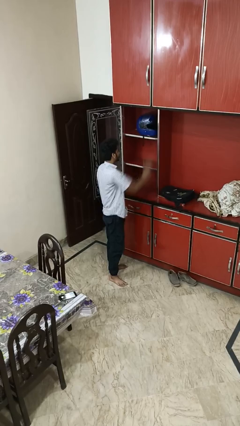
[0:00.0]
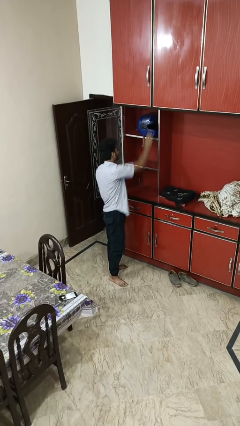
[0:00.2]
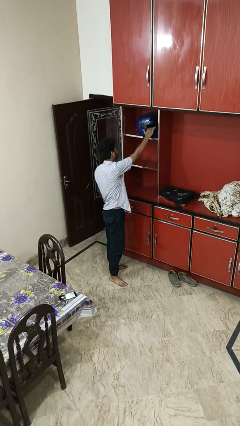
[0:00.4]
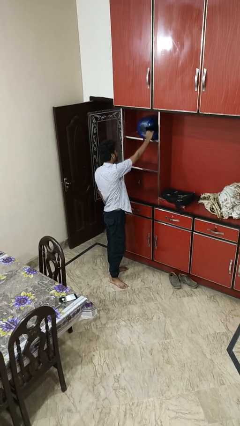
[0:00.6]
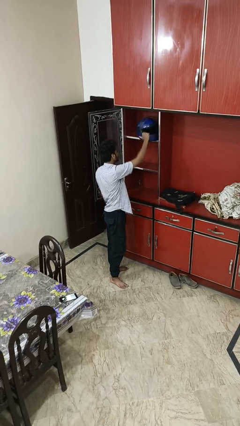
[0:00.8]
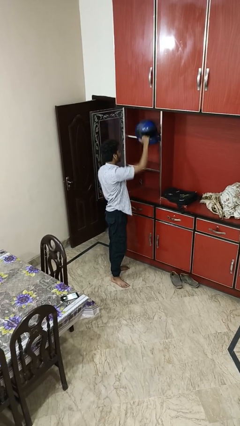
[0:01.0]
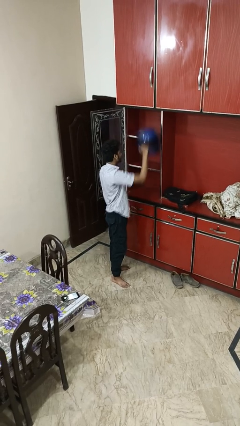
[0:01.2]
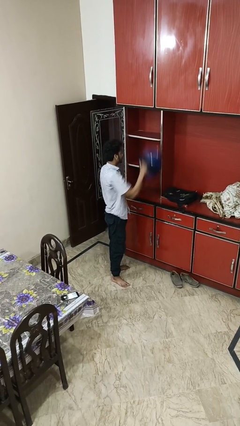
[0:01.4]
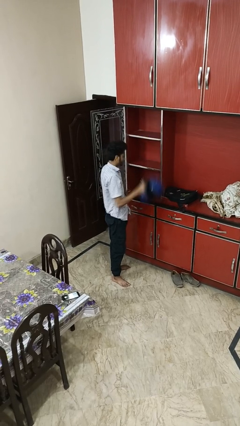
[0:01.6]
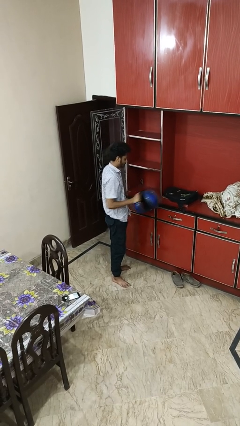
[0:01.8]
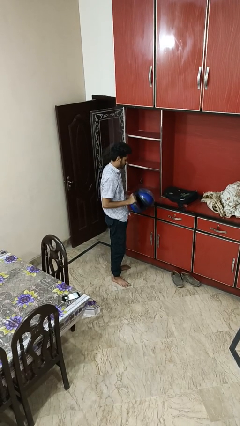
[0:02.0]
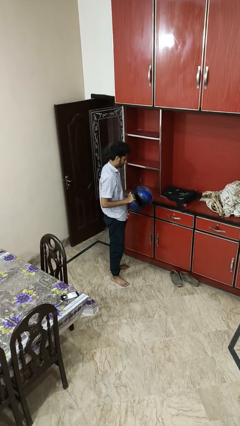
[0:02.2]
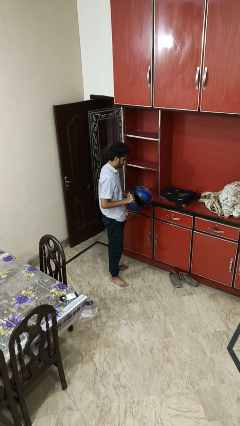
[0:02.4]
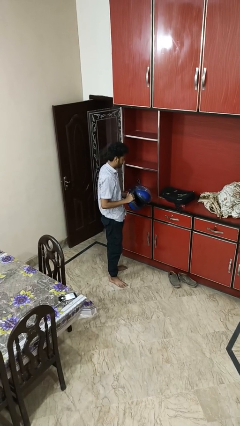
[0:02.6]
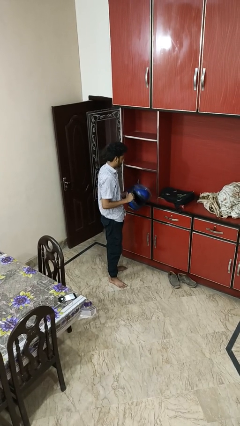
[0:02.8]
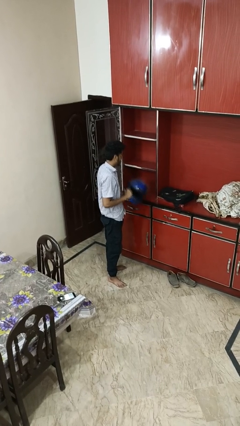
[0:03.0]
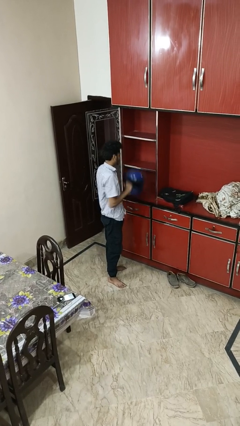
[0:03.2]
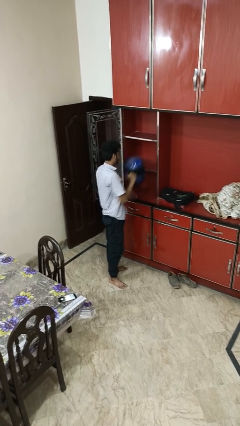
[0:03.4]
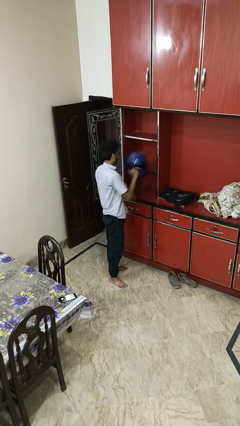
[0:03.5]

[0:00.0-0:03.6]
person picks up object from shelf

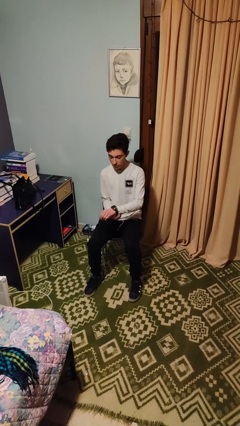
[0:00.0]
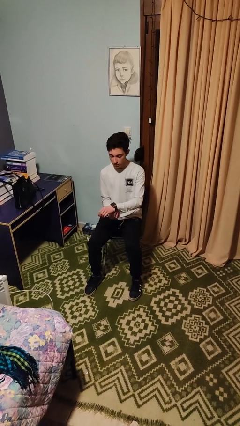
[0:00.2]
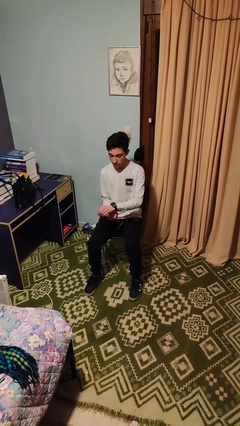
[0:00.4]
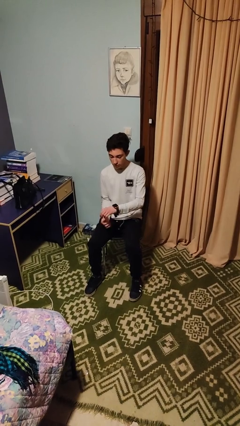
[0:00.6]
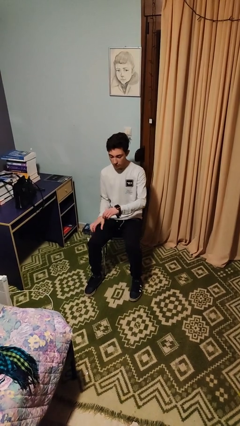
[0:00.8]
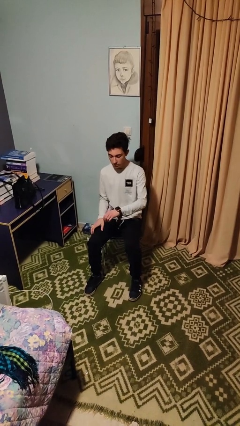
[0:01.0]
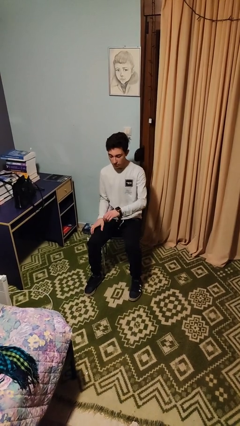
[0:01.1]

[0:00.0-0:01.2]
person puts on wristwatch

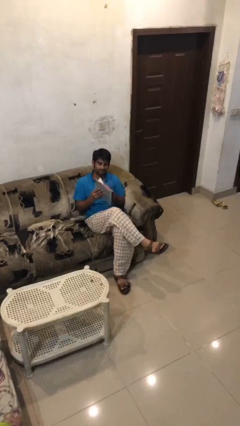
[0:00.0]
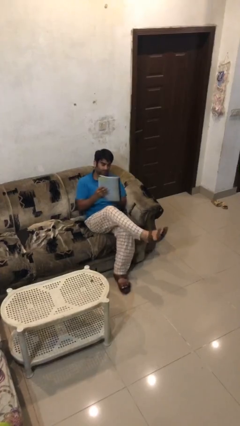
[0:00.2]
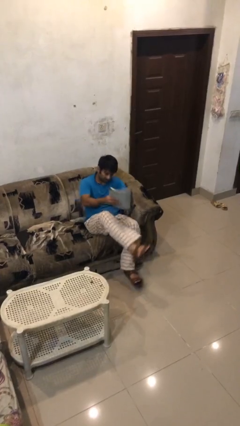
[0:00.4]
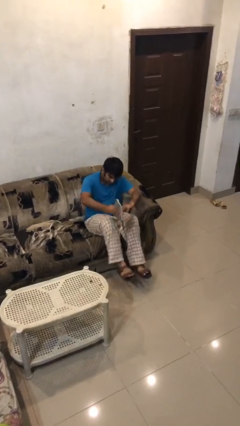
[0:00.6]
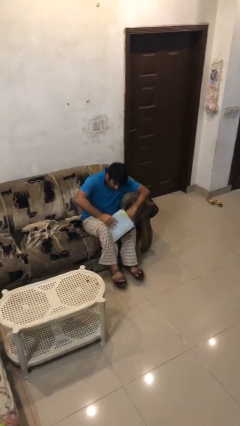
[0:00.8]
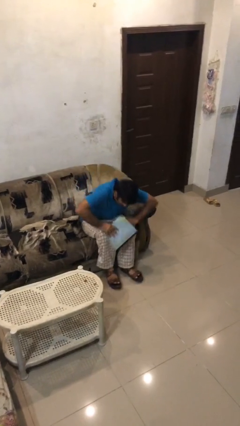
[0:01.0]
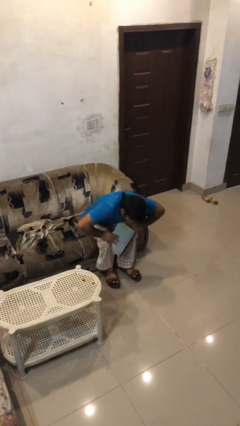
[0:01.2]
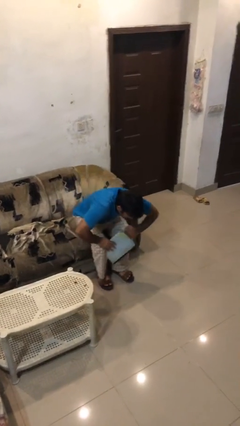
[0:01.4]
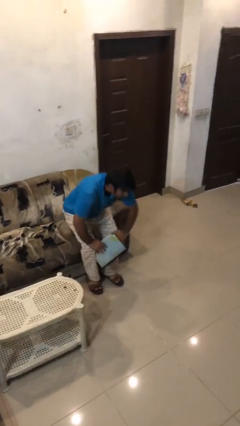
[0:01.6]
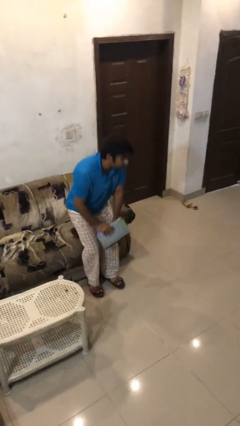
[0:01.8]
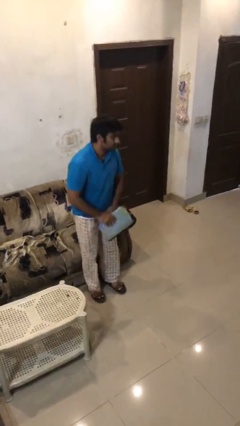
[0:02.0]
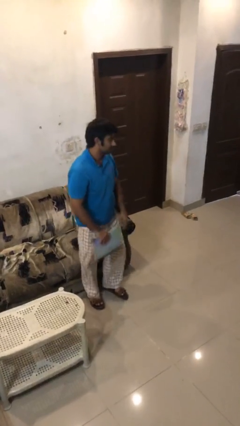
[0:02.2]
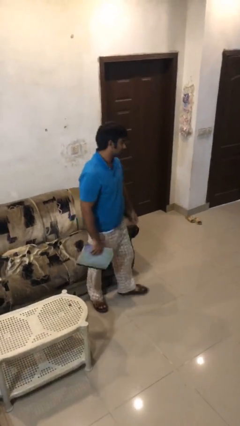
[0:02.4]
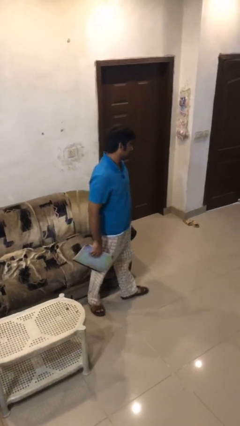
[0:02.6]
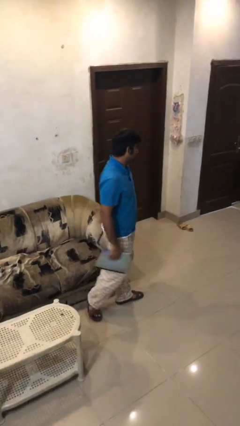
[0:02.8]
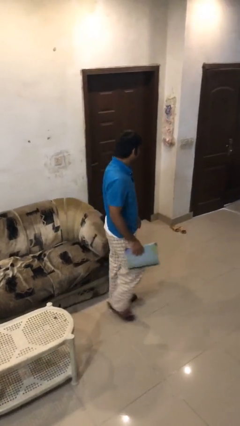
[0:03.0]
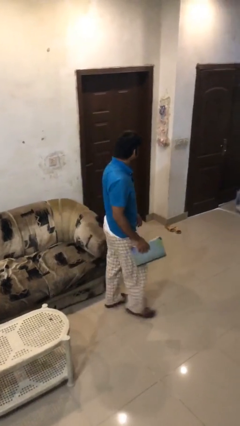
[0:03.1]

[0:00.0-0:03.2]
person stands up

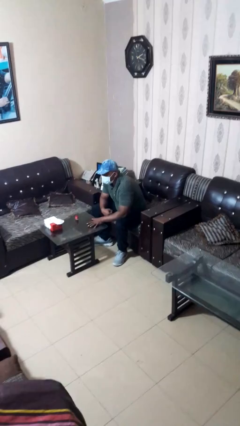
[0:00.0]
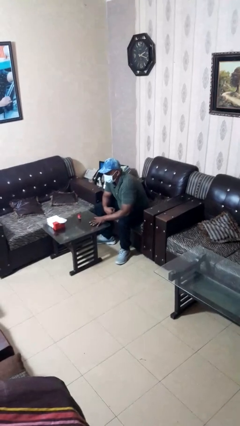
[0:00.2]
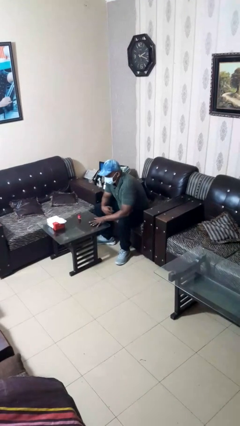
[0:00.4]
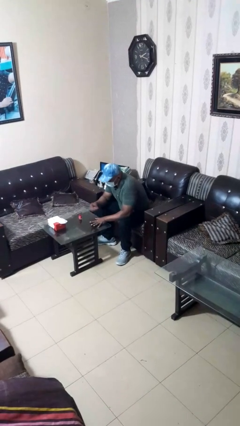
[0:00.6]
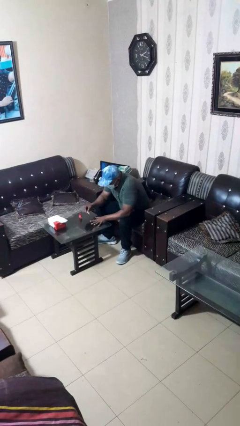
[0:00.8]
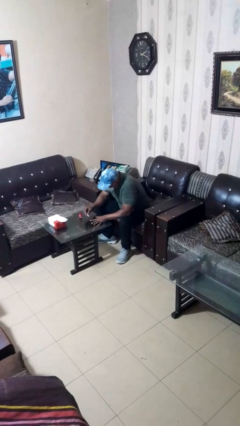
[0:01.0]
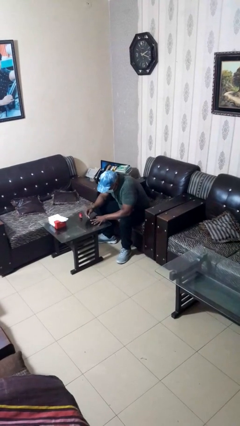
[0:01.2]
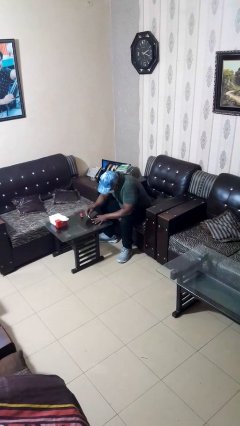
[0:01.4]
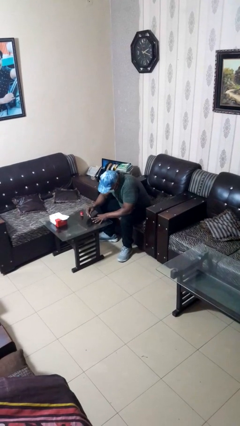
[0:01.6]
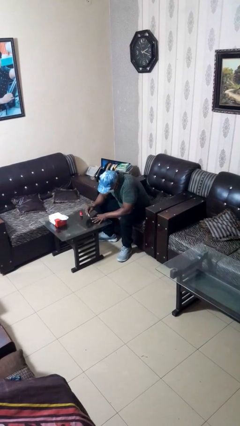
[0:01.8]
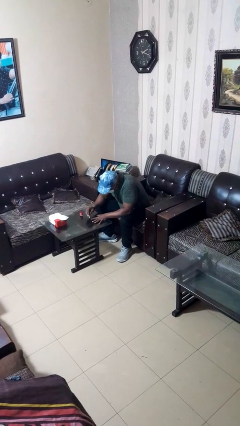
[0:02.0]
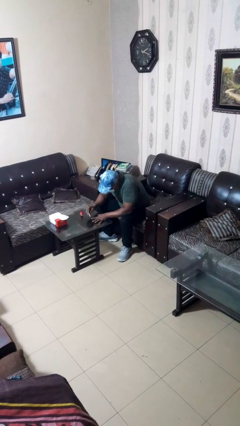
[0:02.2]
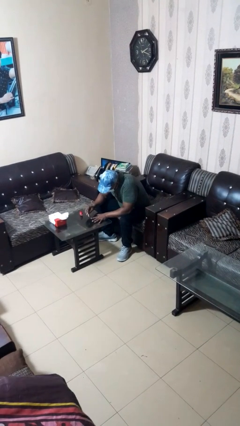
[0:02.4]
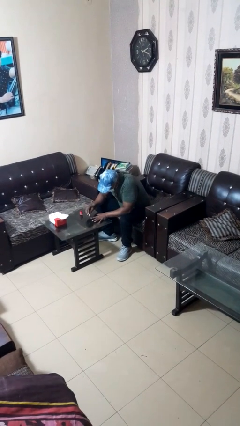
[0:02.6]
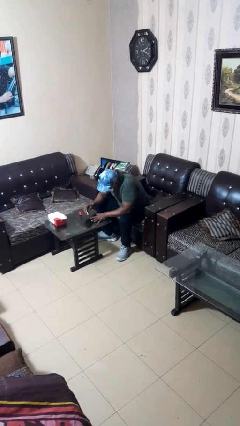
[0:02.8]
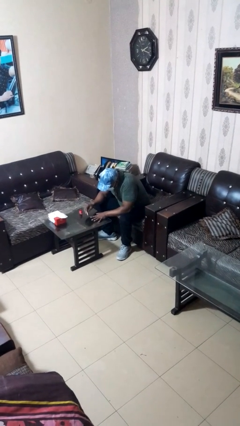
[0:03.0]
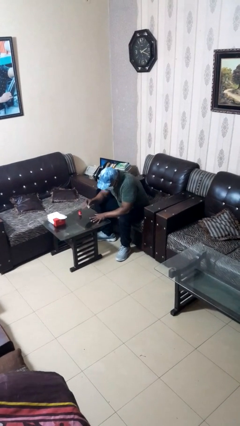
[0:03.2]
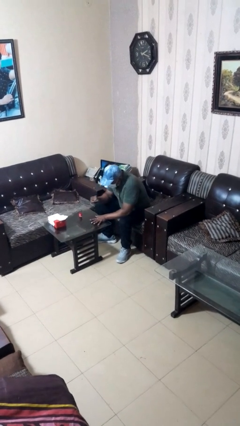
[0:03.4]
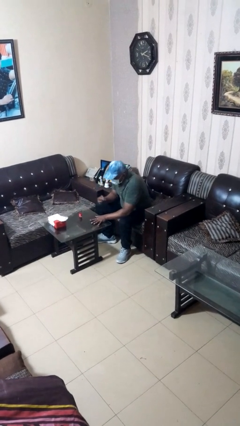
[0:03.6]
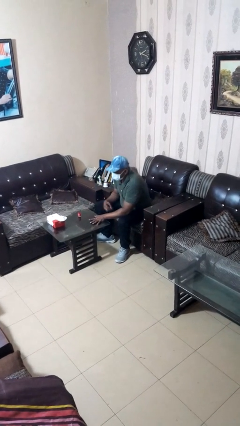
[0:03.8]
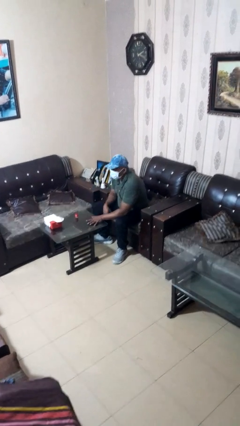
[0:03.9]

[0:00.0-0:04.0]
person paints fingernails

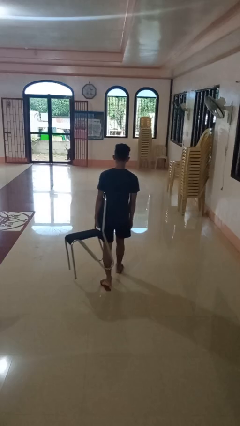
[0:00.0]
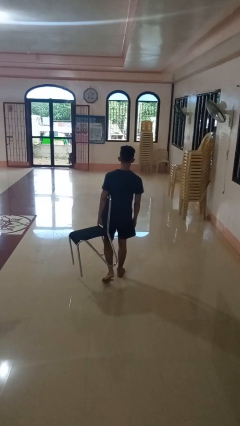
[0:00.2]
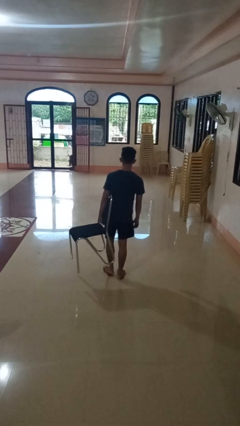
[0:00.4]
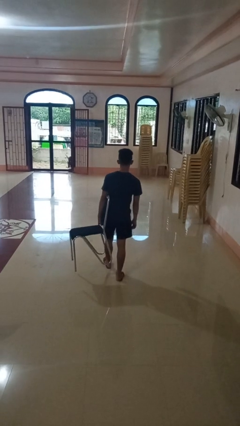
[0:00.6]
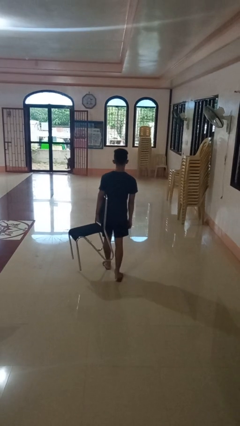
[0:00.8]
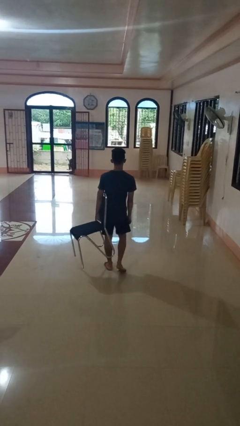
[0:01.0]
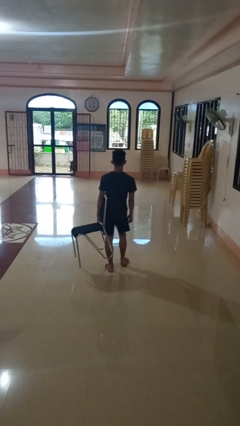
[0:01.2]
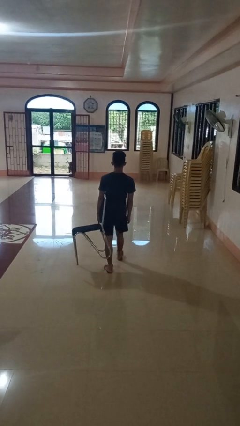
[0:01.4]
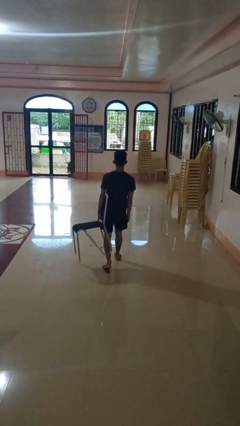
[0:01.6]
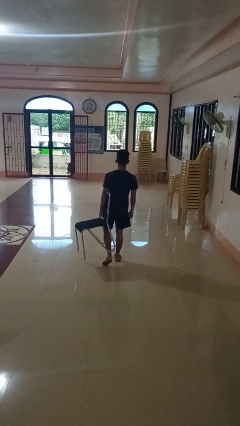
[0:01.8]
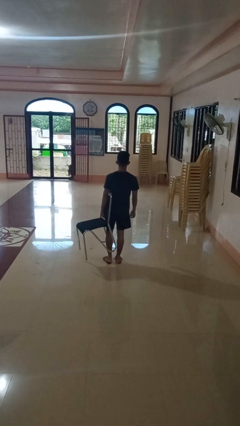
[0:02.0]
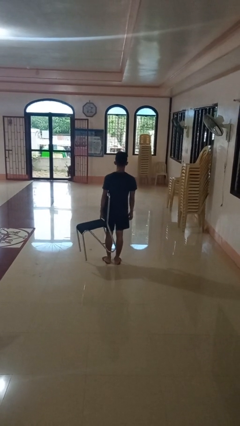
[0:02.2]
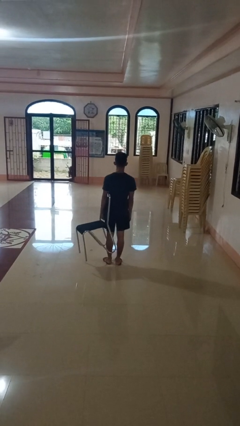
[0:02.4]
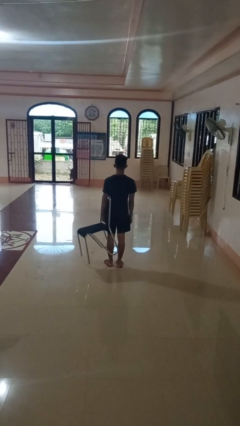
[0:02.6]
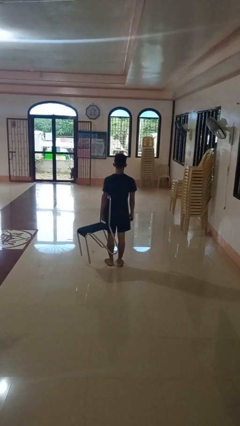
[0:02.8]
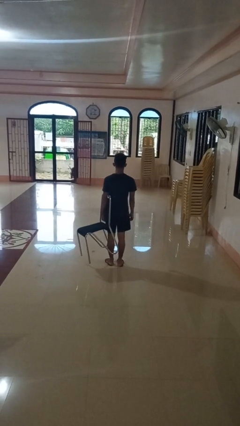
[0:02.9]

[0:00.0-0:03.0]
person carries furniture

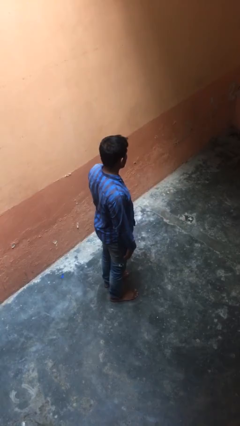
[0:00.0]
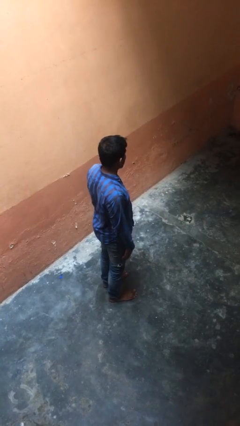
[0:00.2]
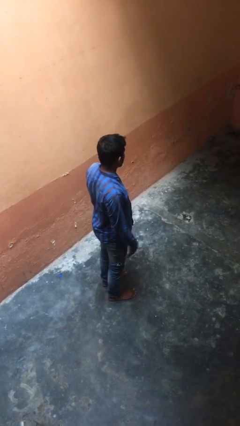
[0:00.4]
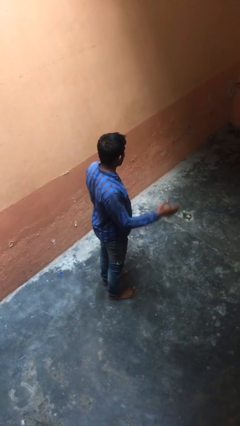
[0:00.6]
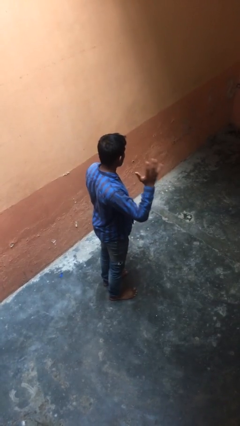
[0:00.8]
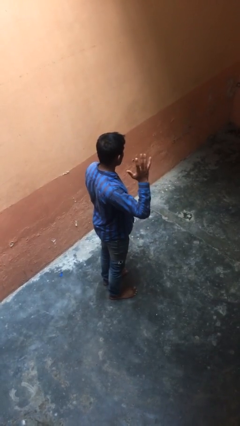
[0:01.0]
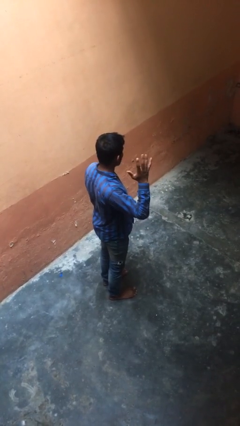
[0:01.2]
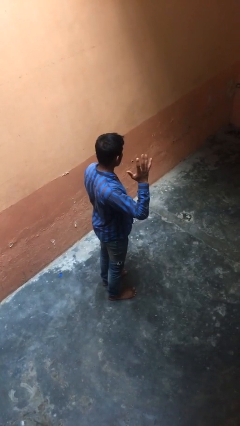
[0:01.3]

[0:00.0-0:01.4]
person gestures number five

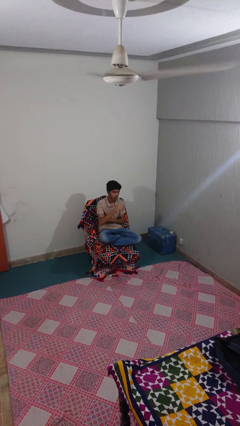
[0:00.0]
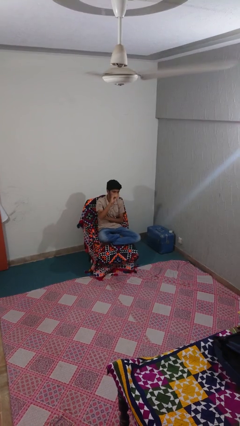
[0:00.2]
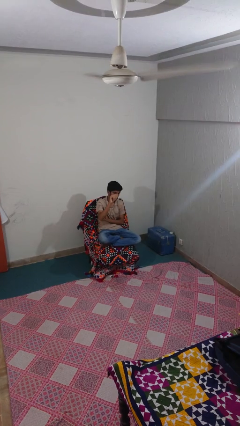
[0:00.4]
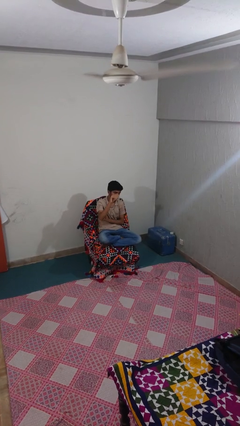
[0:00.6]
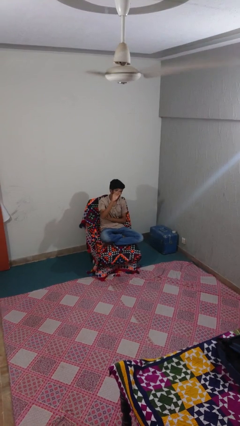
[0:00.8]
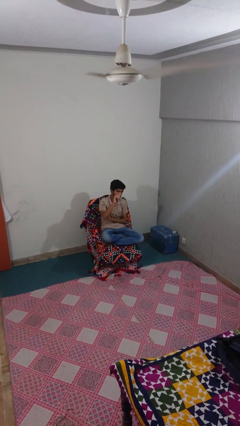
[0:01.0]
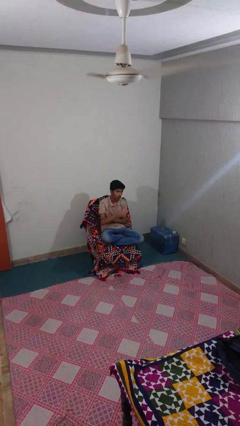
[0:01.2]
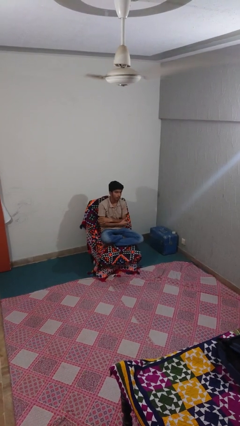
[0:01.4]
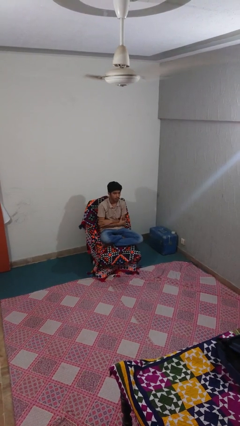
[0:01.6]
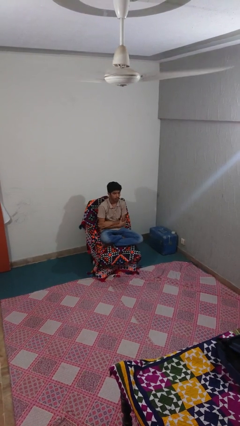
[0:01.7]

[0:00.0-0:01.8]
person gestures come here
